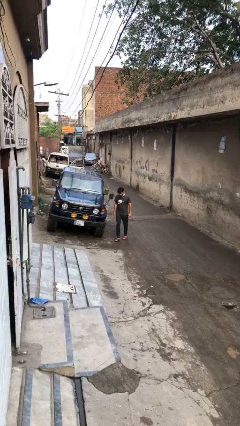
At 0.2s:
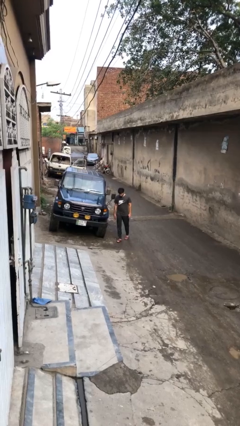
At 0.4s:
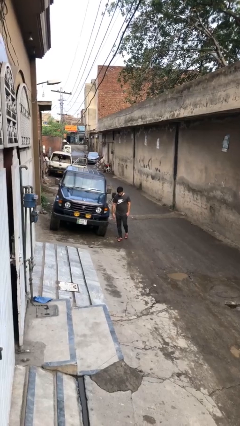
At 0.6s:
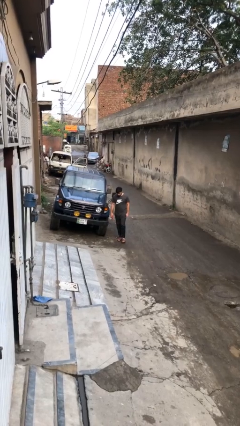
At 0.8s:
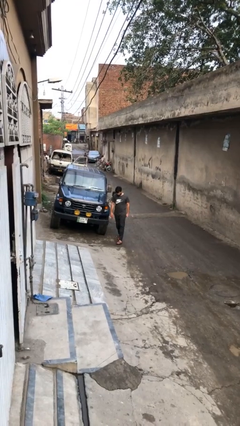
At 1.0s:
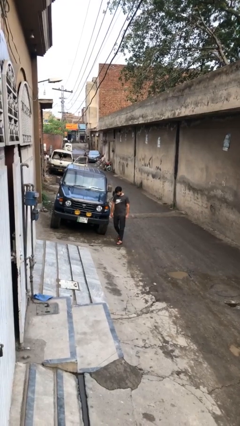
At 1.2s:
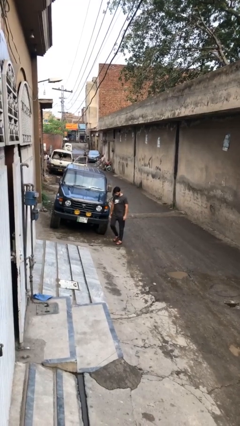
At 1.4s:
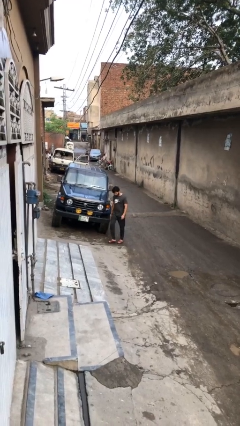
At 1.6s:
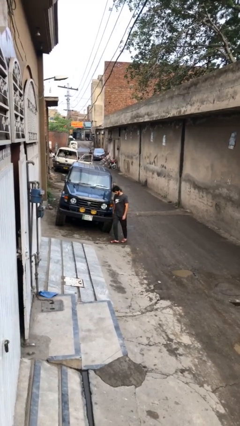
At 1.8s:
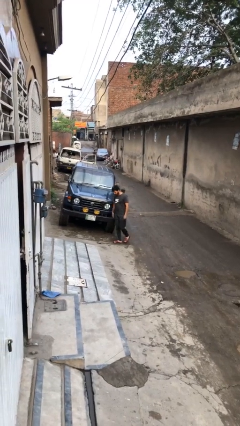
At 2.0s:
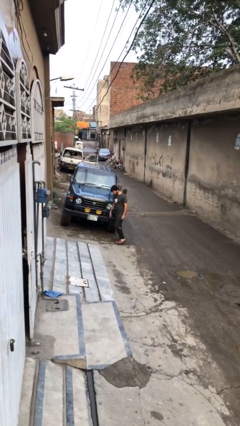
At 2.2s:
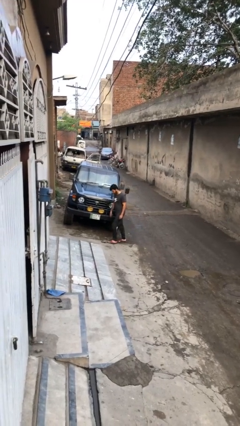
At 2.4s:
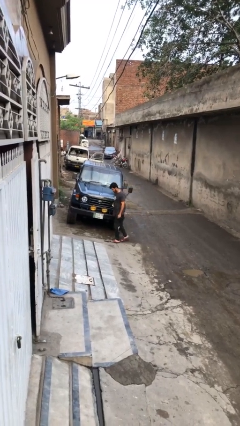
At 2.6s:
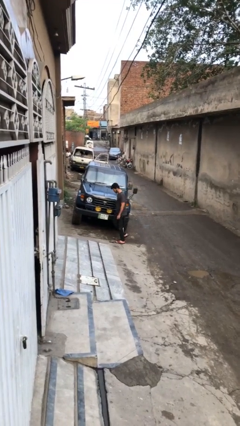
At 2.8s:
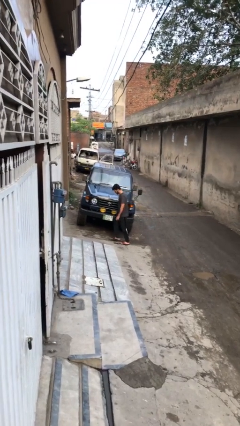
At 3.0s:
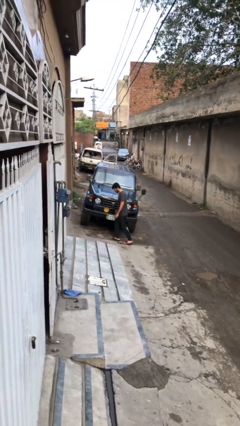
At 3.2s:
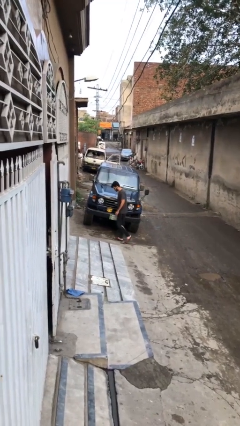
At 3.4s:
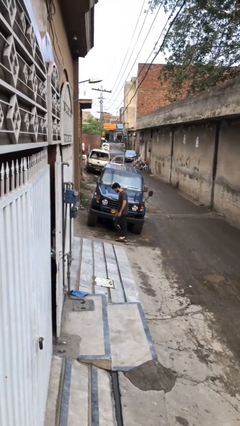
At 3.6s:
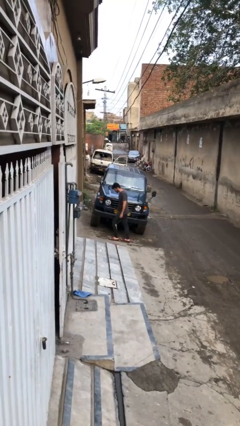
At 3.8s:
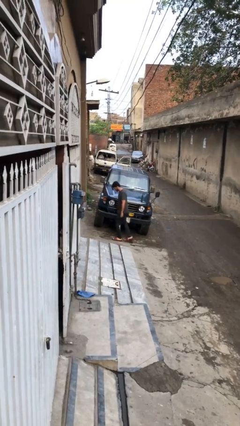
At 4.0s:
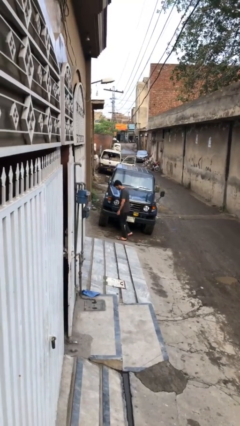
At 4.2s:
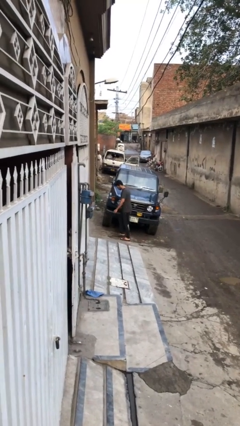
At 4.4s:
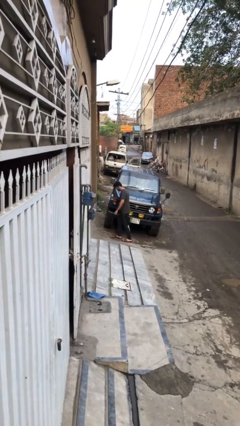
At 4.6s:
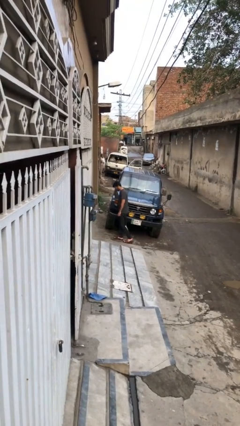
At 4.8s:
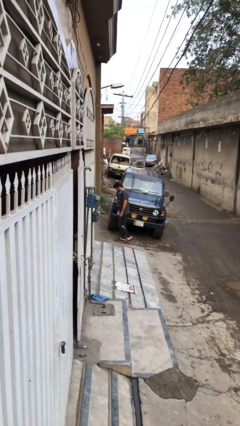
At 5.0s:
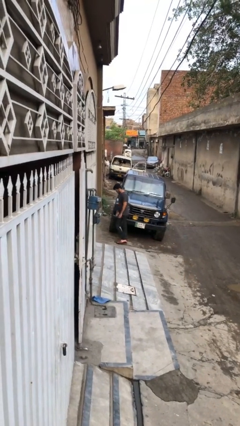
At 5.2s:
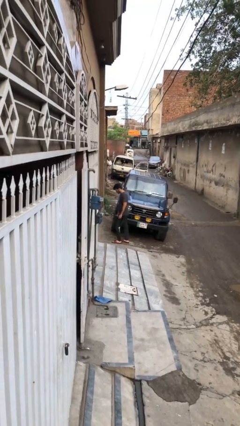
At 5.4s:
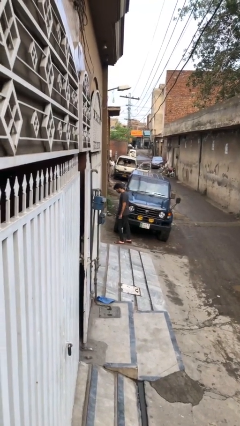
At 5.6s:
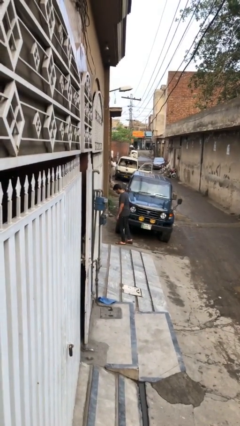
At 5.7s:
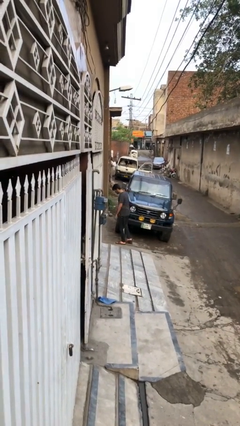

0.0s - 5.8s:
person walks around car

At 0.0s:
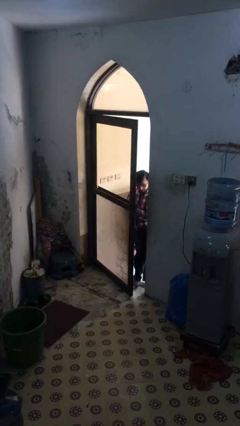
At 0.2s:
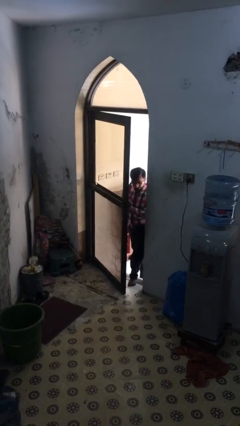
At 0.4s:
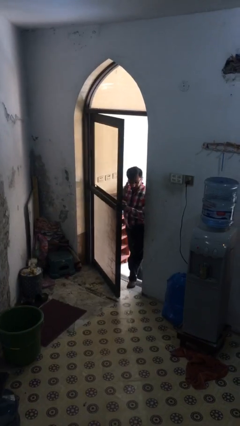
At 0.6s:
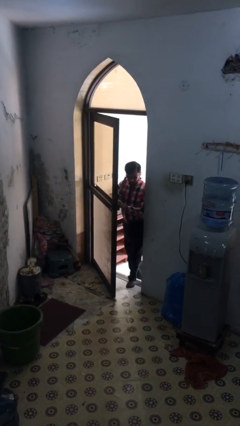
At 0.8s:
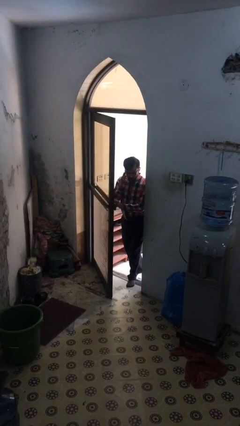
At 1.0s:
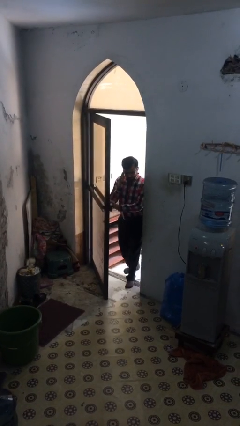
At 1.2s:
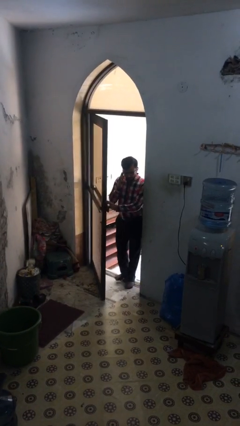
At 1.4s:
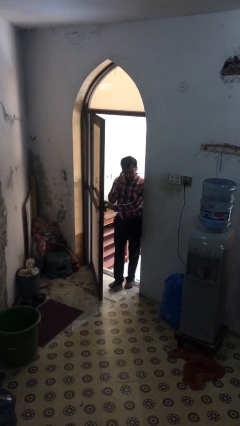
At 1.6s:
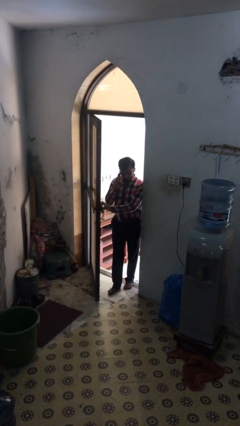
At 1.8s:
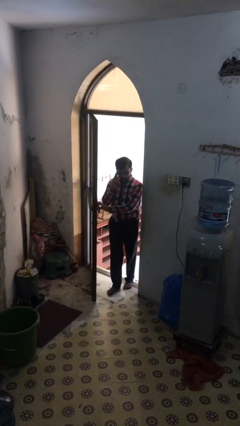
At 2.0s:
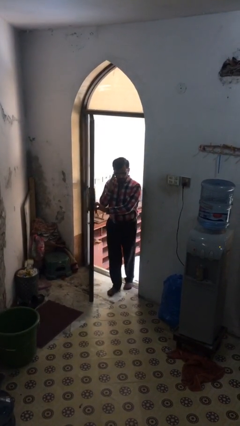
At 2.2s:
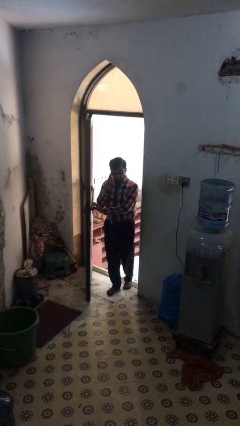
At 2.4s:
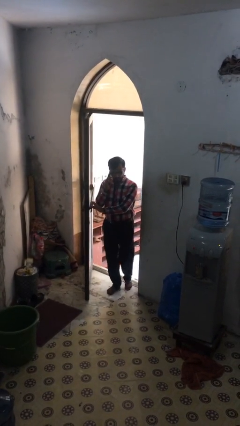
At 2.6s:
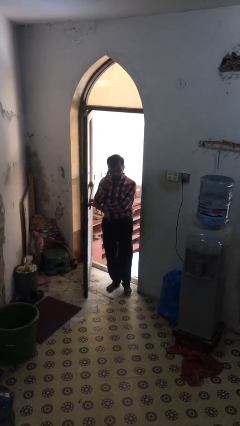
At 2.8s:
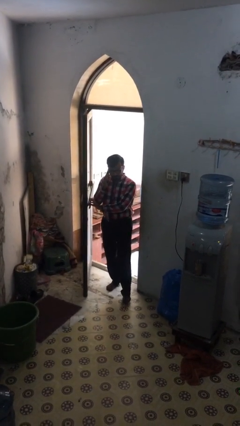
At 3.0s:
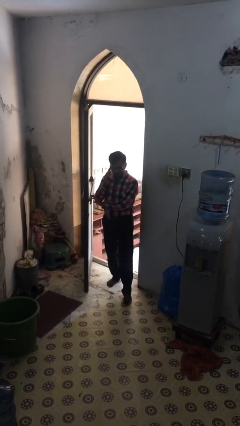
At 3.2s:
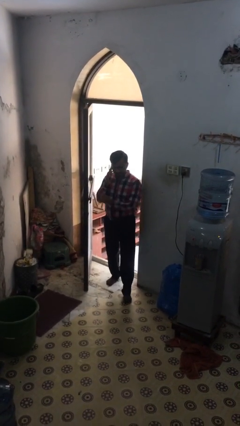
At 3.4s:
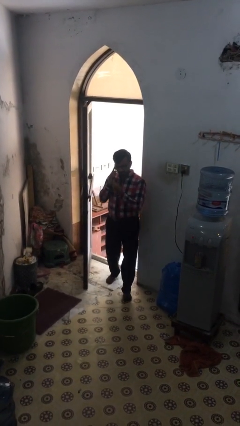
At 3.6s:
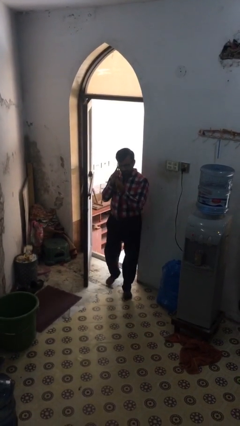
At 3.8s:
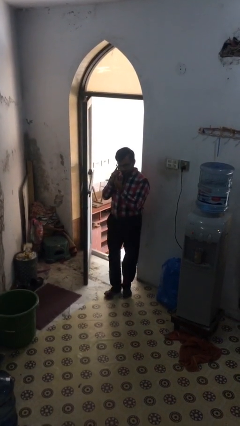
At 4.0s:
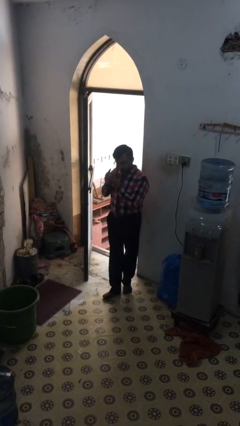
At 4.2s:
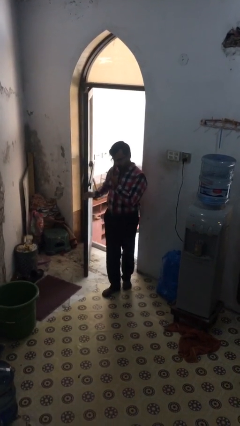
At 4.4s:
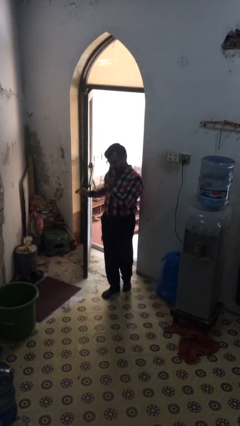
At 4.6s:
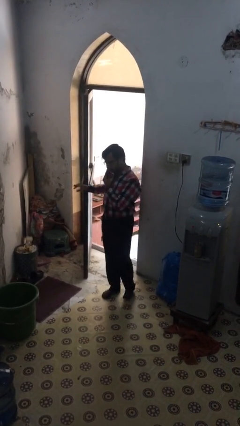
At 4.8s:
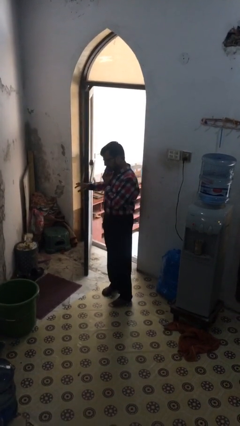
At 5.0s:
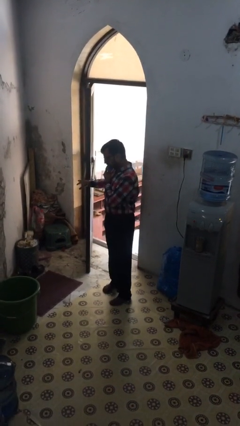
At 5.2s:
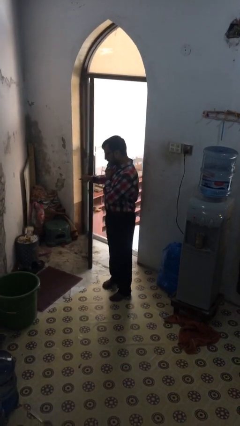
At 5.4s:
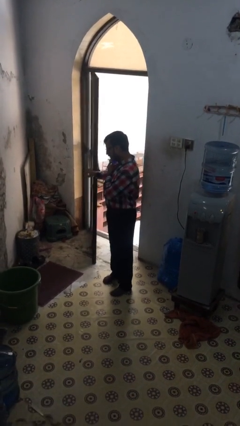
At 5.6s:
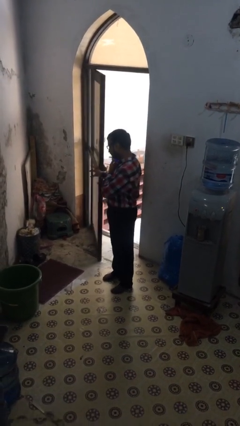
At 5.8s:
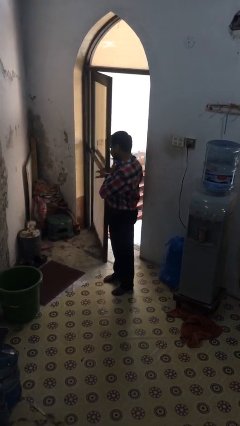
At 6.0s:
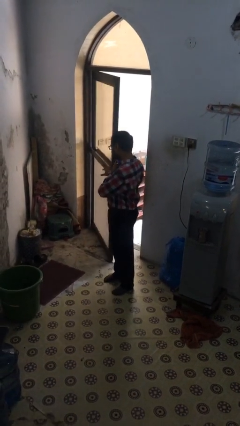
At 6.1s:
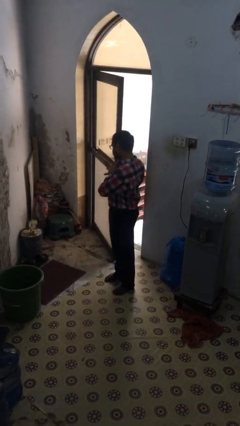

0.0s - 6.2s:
person enters scene through structure

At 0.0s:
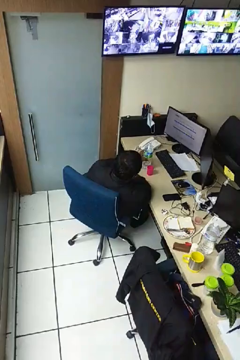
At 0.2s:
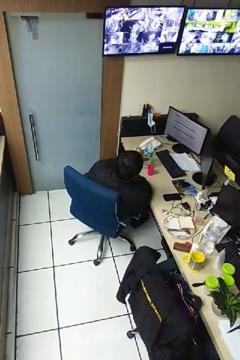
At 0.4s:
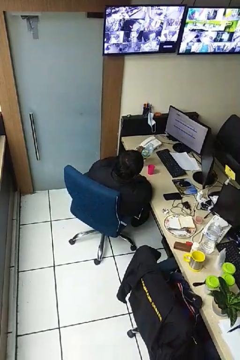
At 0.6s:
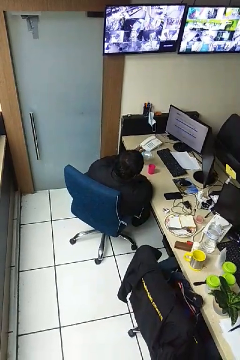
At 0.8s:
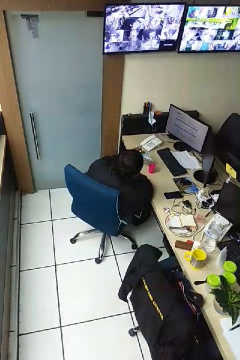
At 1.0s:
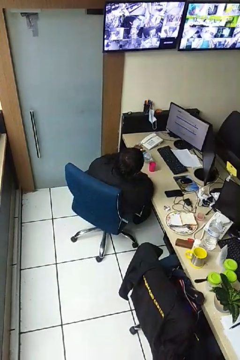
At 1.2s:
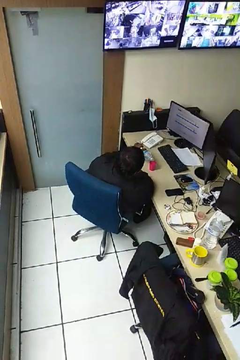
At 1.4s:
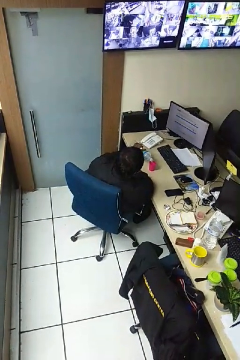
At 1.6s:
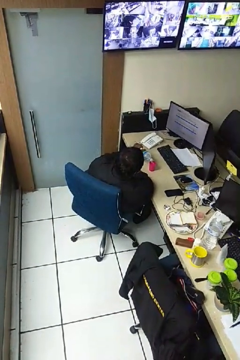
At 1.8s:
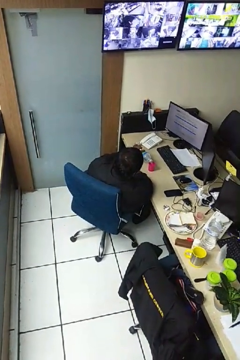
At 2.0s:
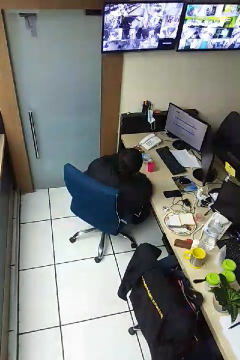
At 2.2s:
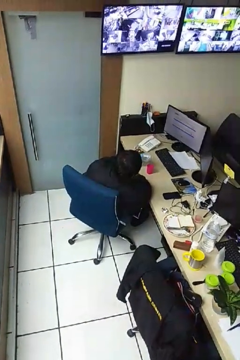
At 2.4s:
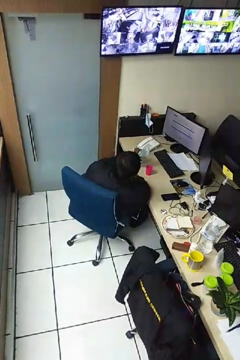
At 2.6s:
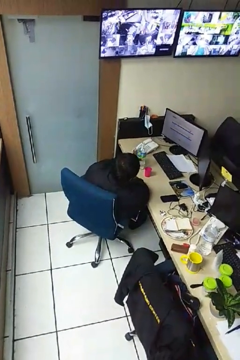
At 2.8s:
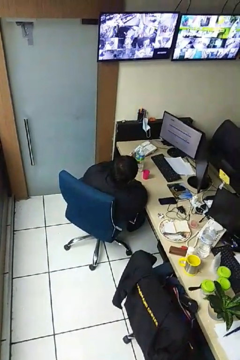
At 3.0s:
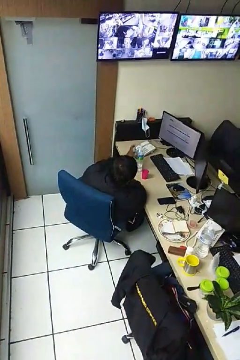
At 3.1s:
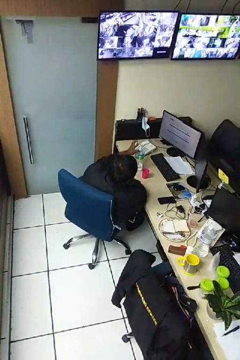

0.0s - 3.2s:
person pours liquid into cup

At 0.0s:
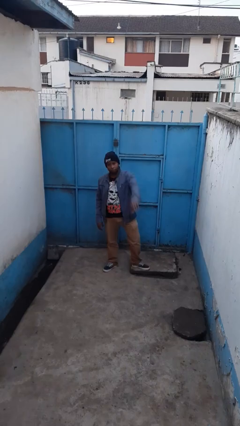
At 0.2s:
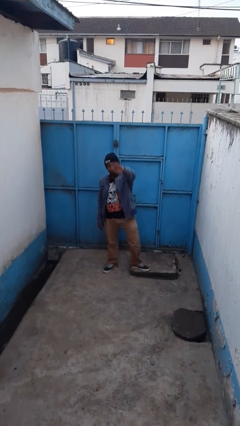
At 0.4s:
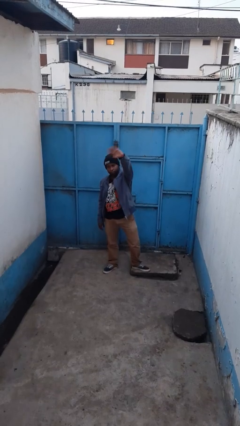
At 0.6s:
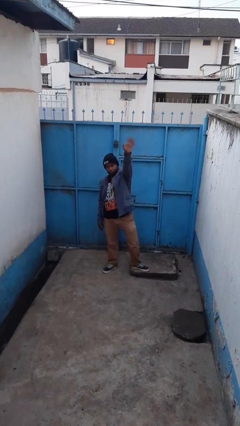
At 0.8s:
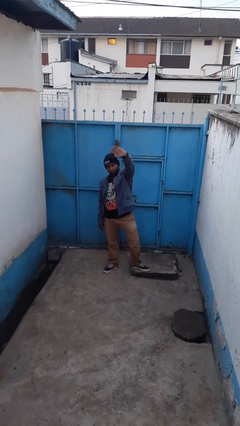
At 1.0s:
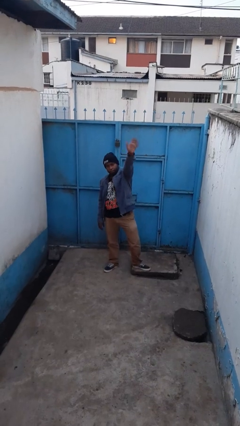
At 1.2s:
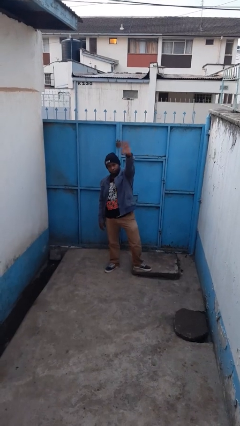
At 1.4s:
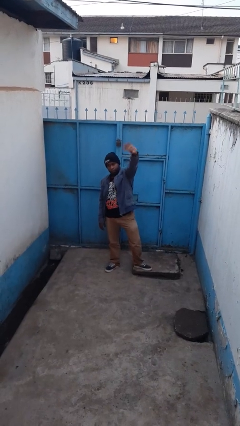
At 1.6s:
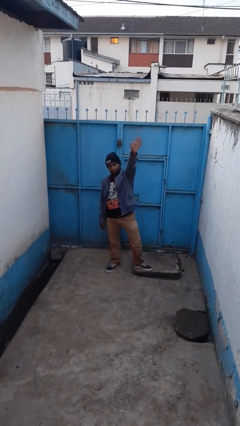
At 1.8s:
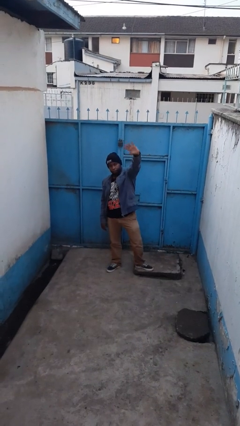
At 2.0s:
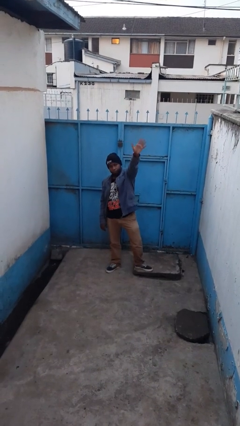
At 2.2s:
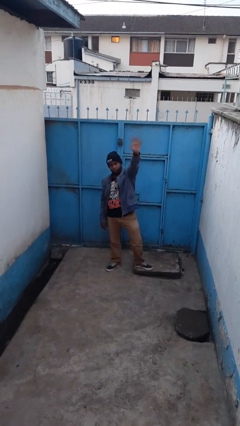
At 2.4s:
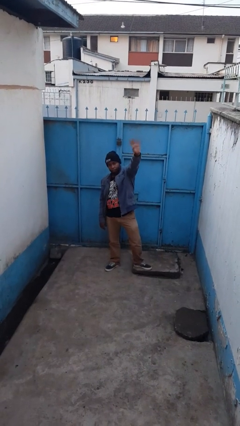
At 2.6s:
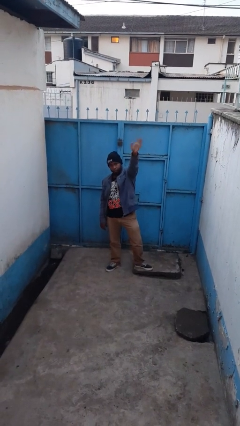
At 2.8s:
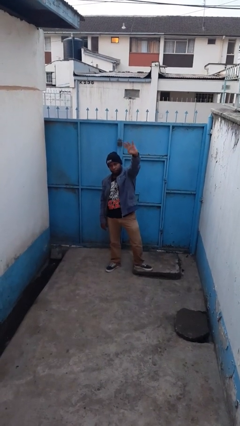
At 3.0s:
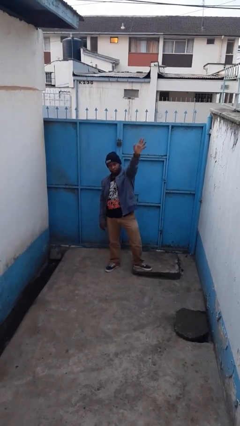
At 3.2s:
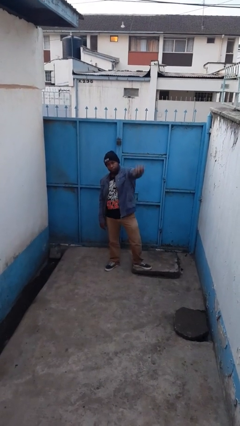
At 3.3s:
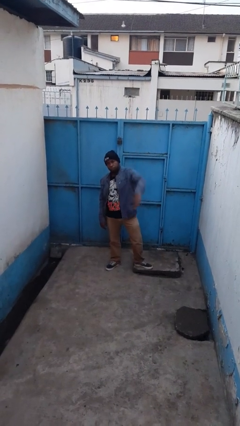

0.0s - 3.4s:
person waves at person
